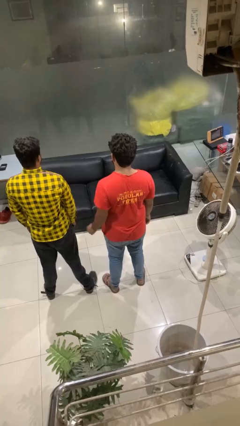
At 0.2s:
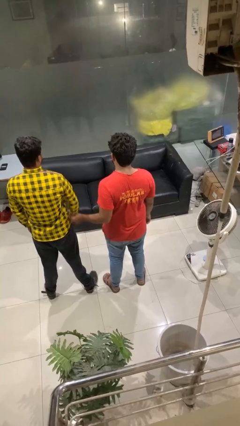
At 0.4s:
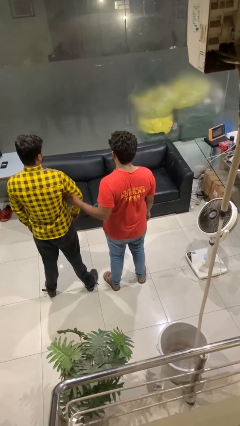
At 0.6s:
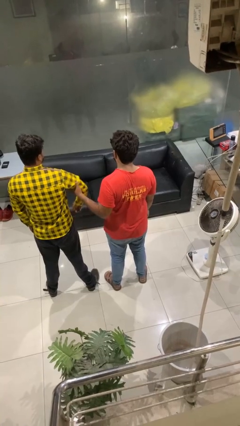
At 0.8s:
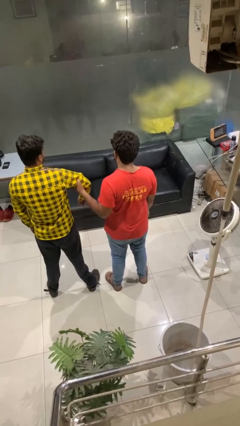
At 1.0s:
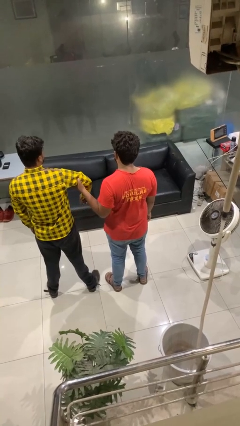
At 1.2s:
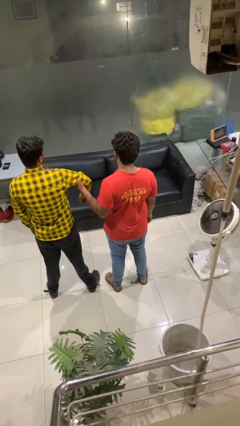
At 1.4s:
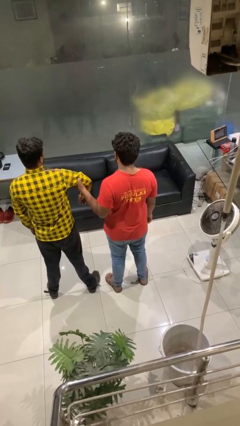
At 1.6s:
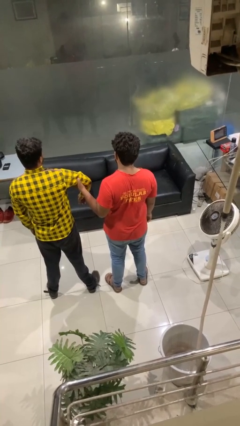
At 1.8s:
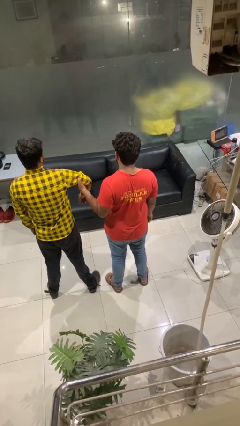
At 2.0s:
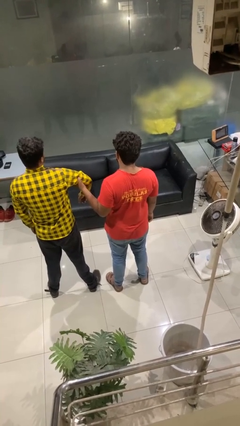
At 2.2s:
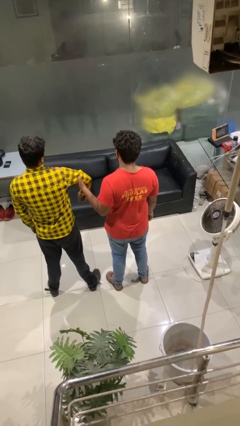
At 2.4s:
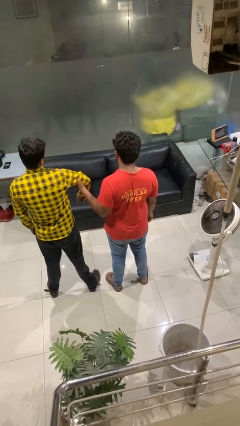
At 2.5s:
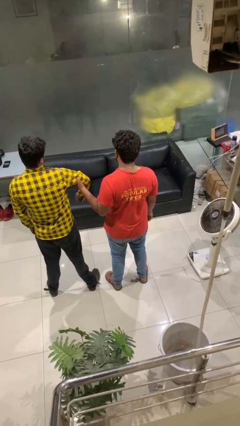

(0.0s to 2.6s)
person grabs person by bicep

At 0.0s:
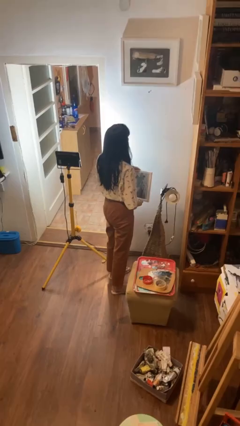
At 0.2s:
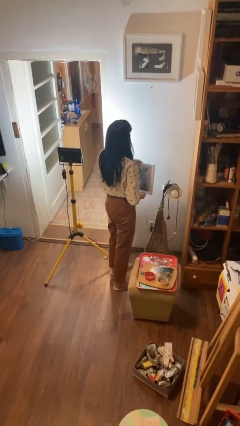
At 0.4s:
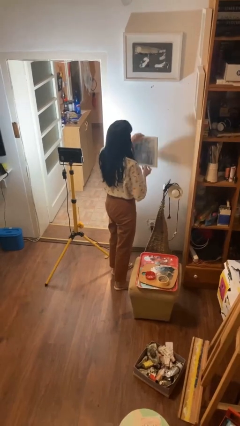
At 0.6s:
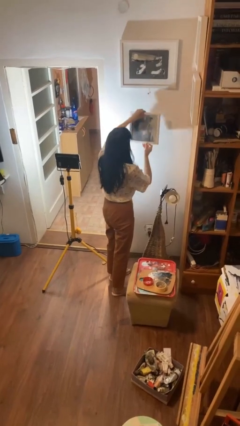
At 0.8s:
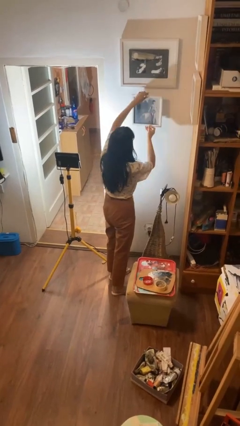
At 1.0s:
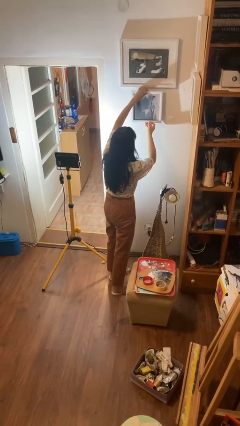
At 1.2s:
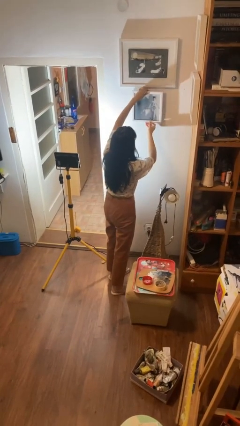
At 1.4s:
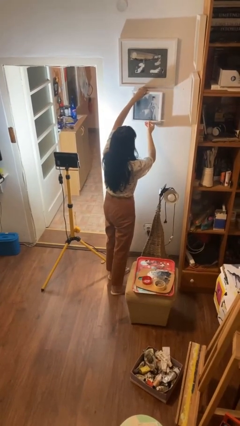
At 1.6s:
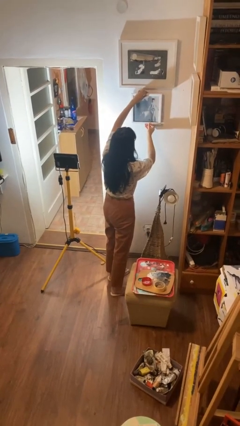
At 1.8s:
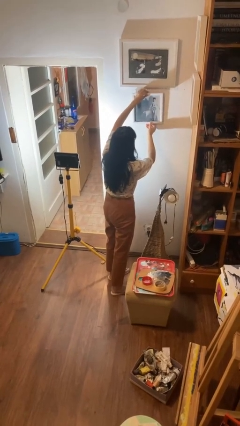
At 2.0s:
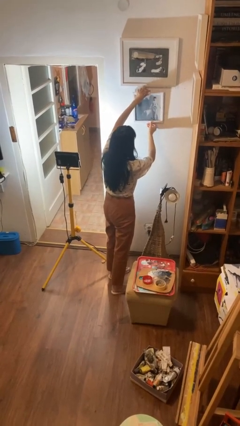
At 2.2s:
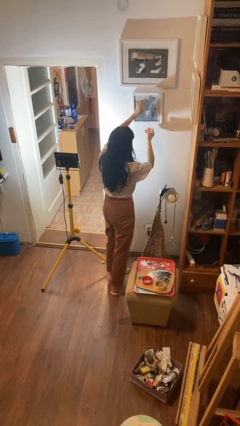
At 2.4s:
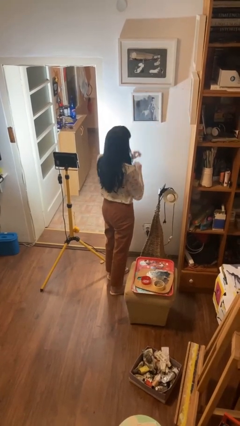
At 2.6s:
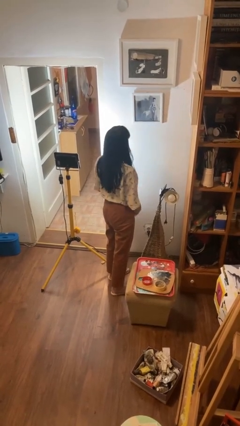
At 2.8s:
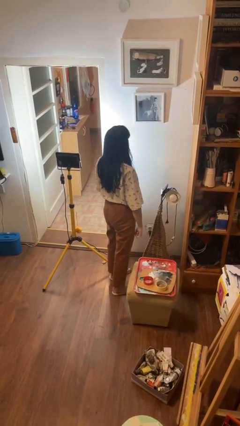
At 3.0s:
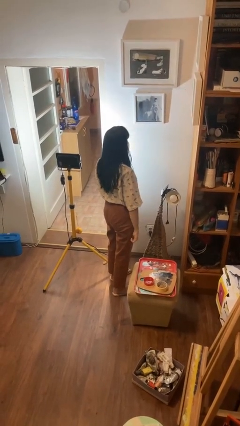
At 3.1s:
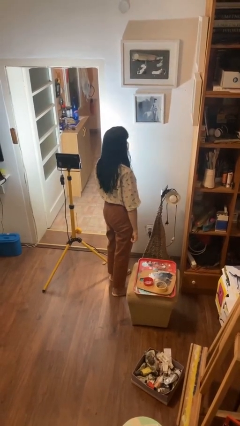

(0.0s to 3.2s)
person puts up picture frame

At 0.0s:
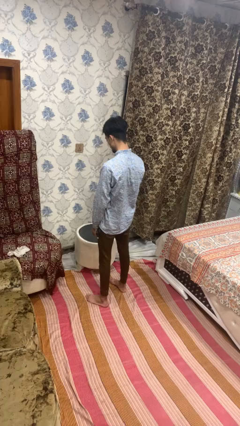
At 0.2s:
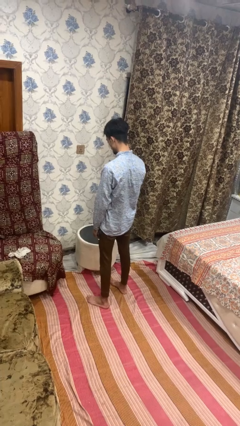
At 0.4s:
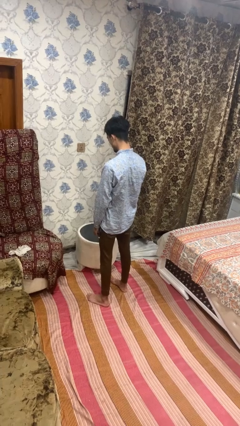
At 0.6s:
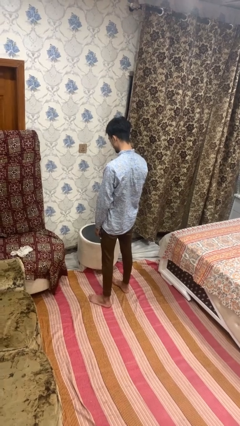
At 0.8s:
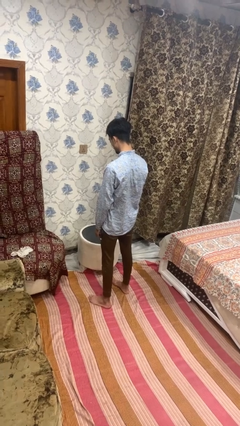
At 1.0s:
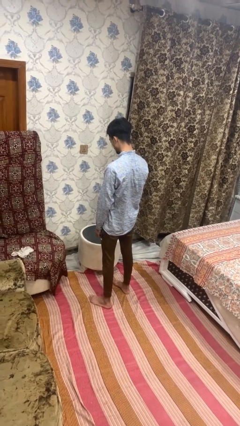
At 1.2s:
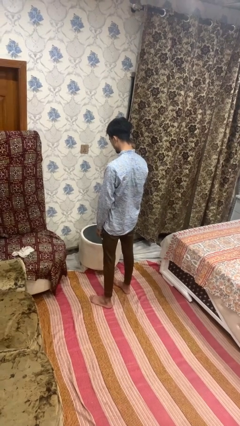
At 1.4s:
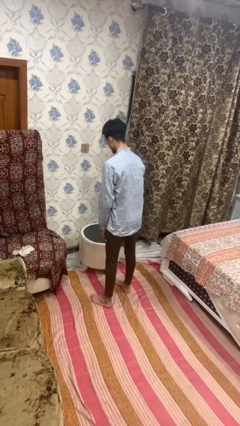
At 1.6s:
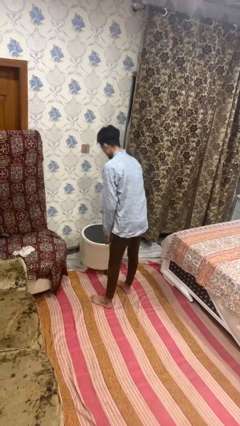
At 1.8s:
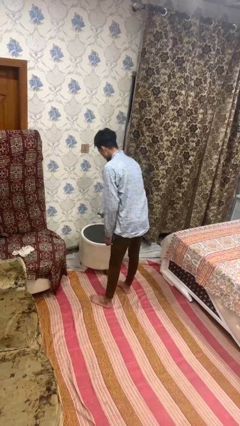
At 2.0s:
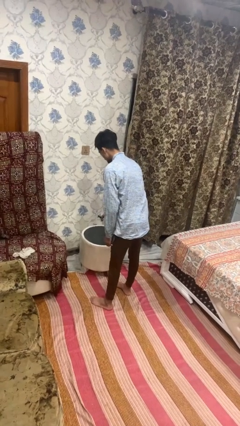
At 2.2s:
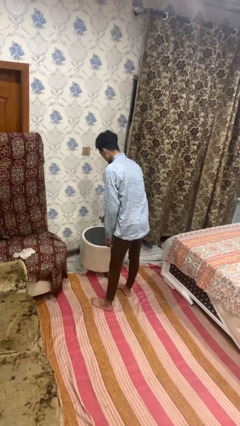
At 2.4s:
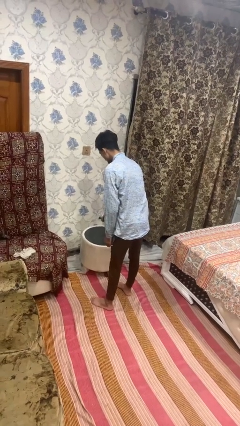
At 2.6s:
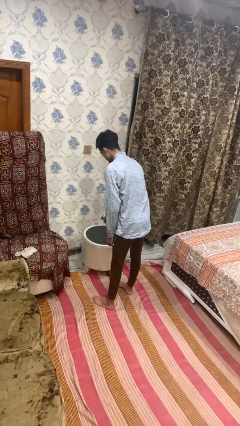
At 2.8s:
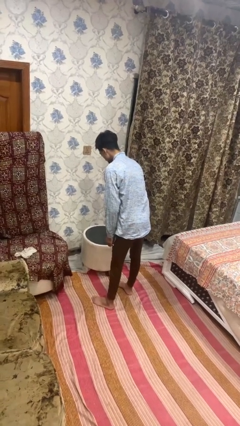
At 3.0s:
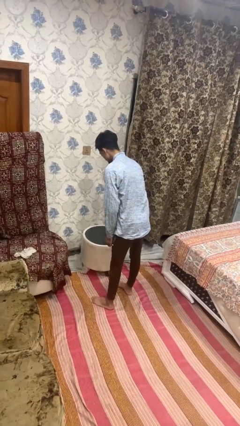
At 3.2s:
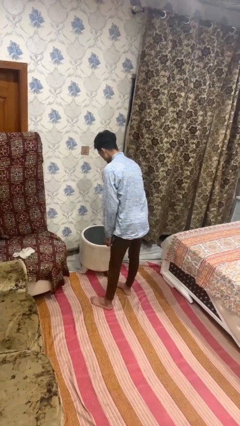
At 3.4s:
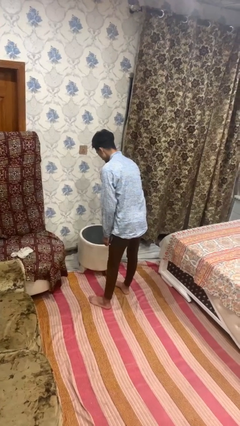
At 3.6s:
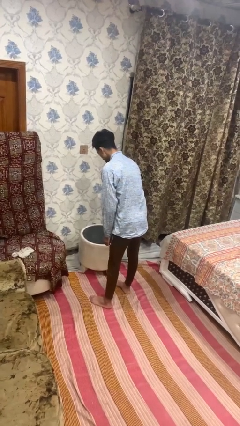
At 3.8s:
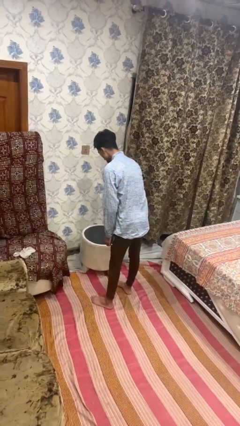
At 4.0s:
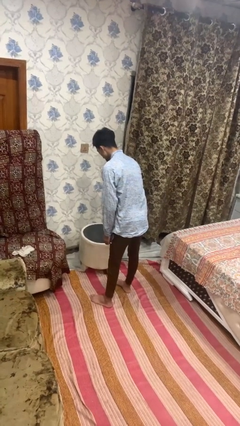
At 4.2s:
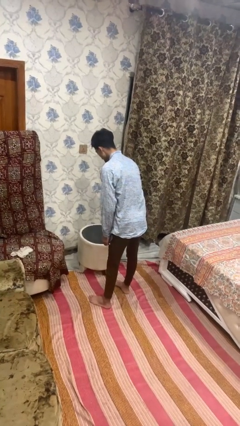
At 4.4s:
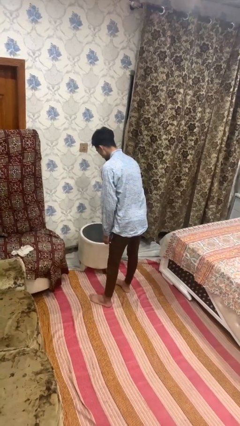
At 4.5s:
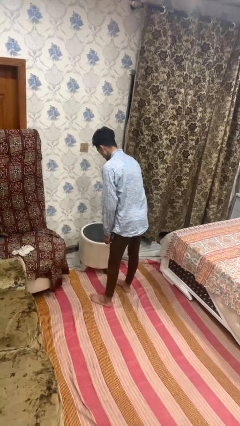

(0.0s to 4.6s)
person sprays from bottle

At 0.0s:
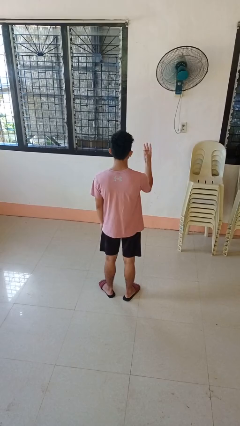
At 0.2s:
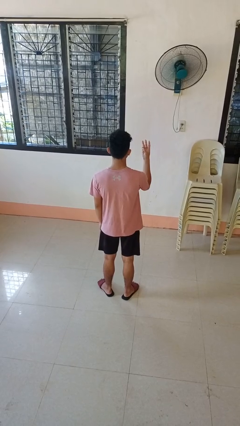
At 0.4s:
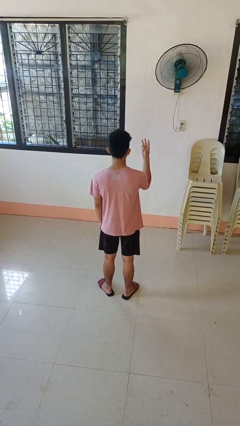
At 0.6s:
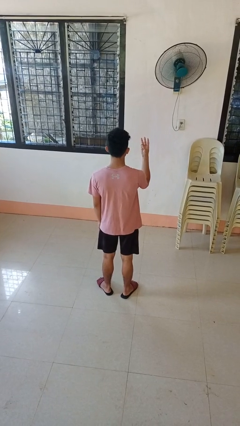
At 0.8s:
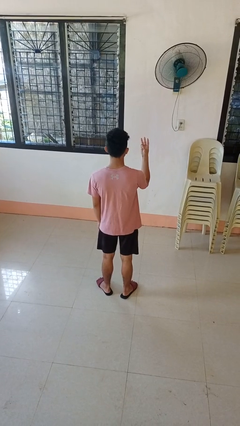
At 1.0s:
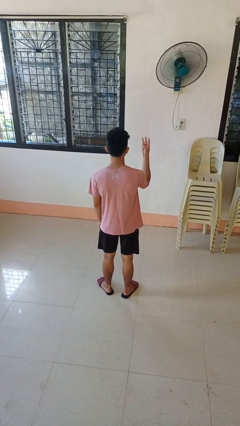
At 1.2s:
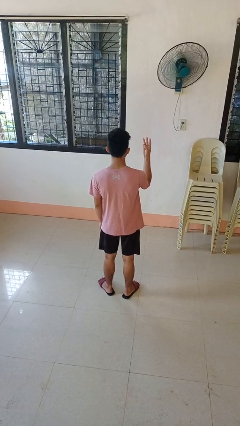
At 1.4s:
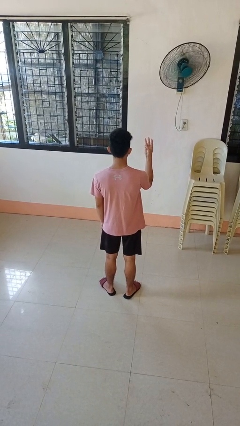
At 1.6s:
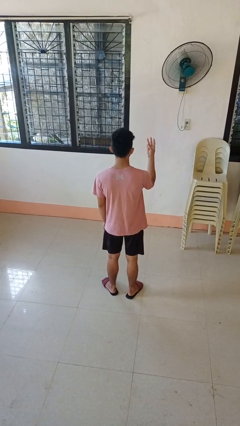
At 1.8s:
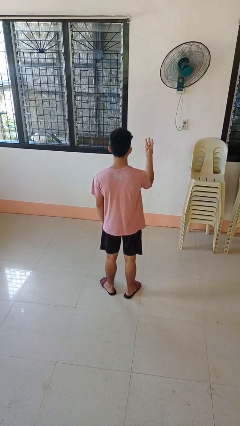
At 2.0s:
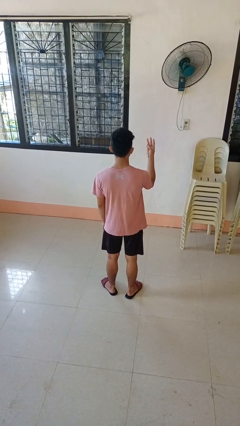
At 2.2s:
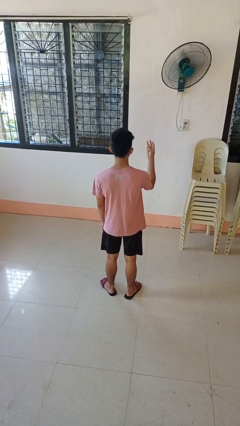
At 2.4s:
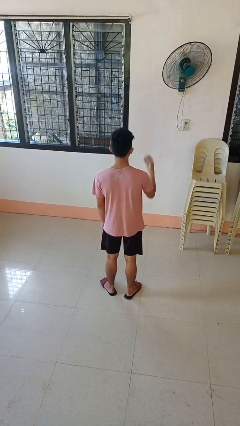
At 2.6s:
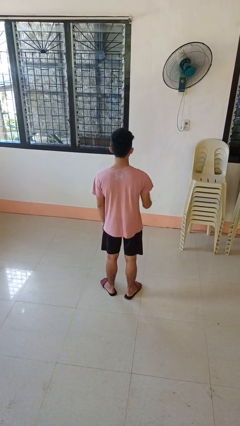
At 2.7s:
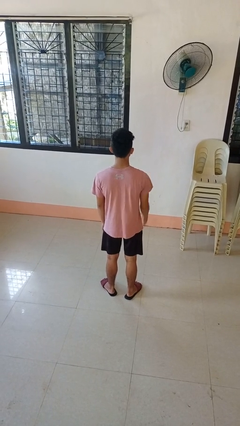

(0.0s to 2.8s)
person gestures number three

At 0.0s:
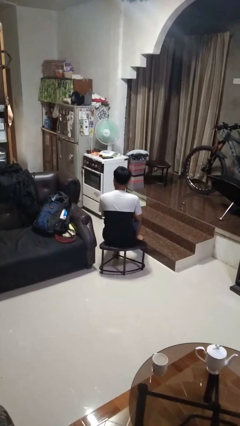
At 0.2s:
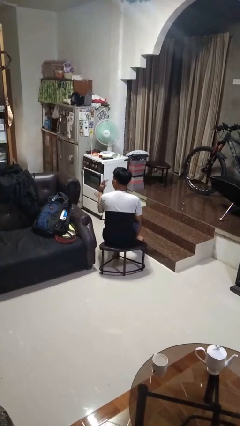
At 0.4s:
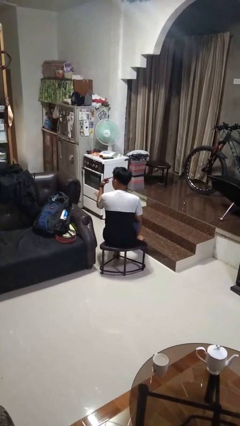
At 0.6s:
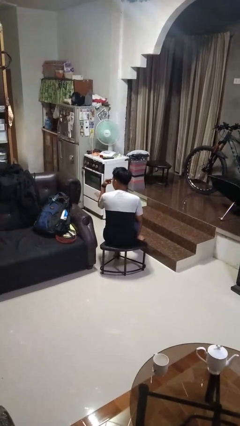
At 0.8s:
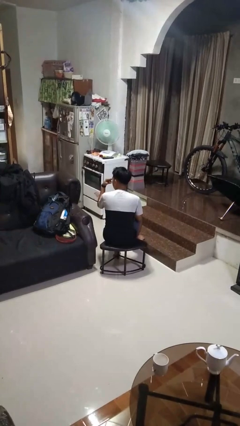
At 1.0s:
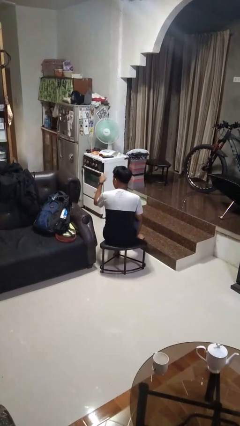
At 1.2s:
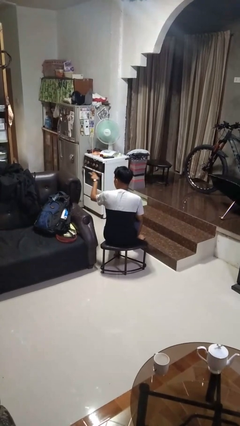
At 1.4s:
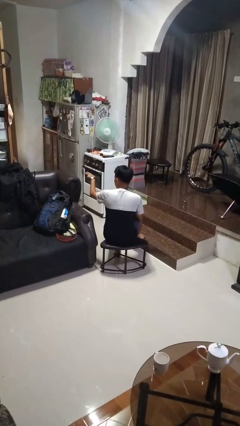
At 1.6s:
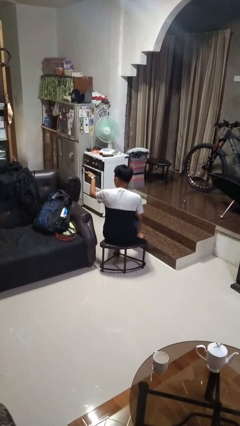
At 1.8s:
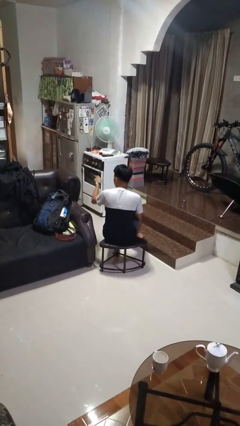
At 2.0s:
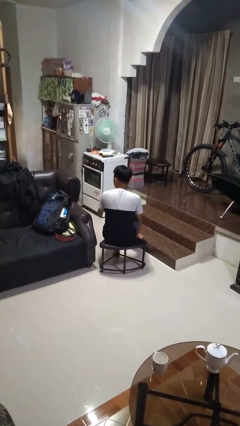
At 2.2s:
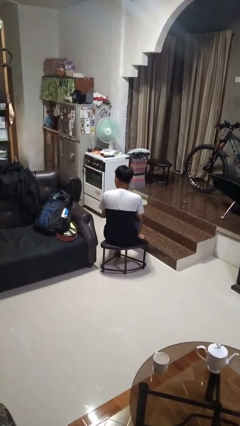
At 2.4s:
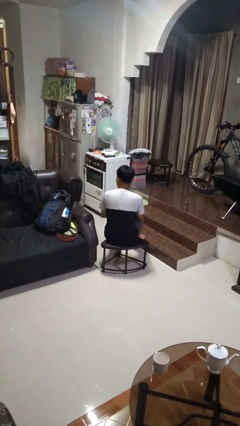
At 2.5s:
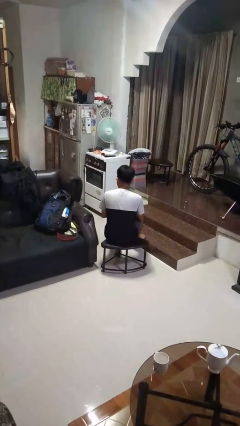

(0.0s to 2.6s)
person gestures watch closely

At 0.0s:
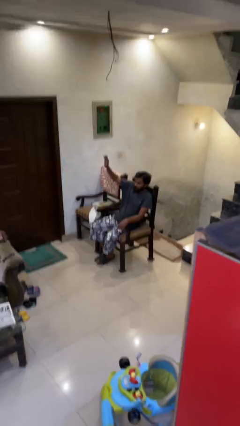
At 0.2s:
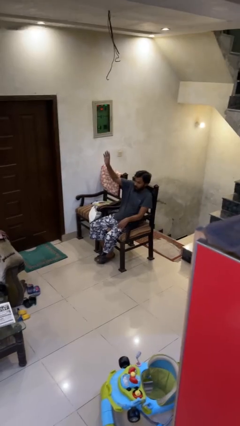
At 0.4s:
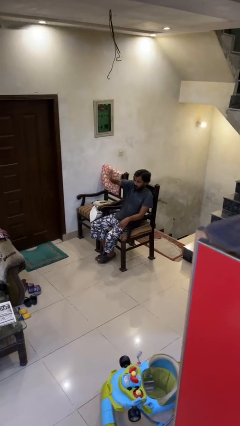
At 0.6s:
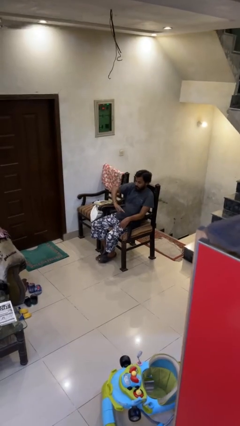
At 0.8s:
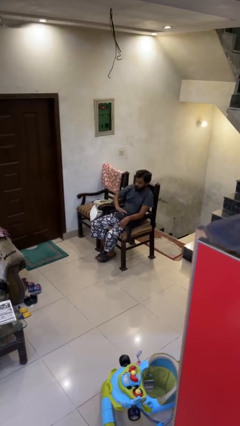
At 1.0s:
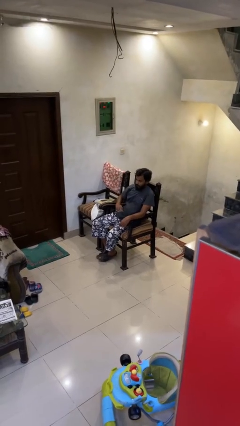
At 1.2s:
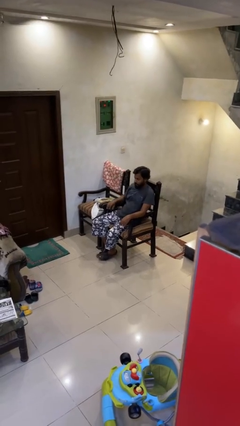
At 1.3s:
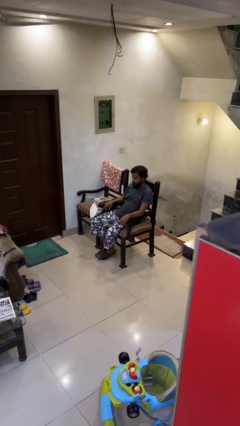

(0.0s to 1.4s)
person gestures swipe down

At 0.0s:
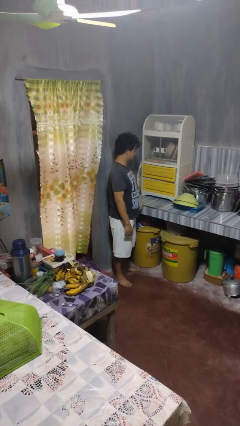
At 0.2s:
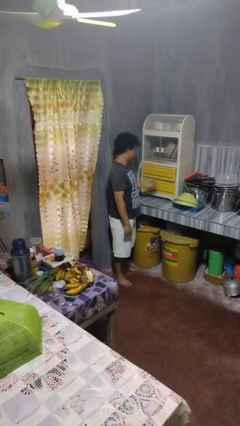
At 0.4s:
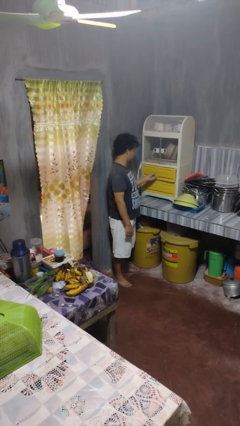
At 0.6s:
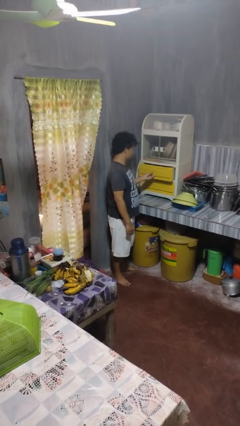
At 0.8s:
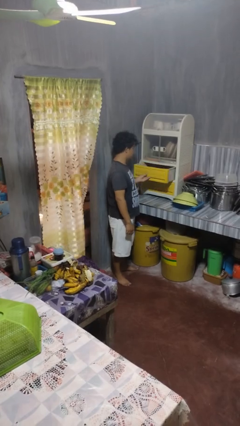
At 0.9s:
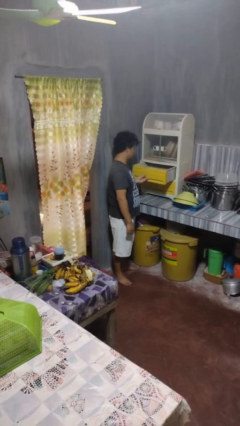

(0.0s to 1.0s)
person opens kitchen drawer
